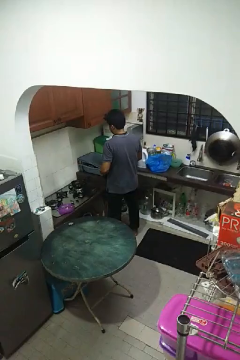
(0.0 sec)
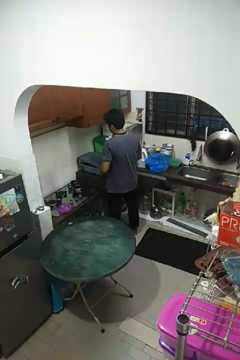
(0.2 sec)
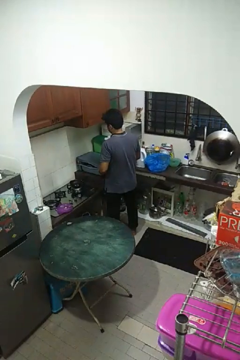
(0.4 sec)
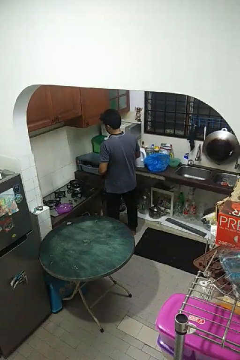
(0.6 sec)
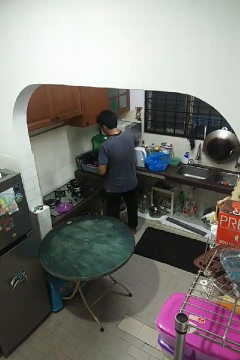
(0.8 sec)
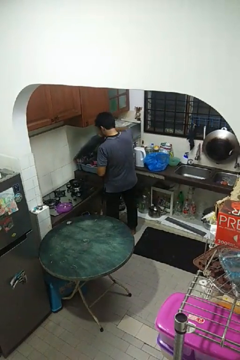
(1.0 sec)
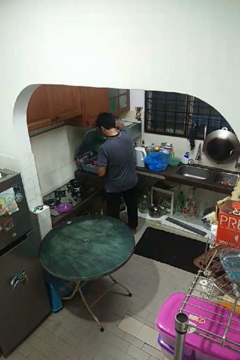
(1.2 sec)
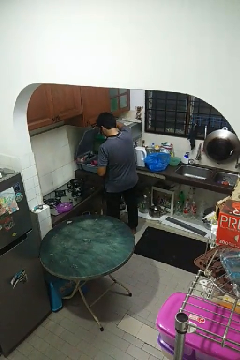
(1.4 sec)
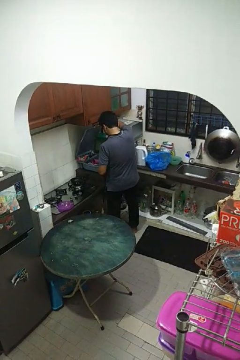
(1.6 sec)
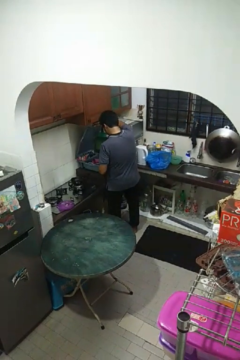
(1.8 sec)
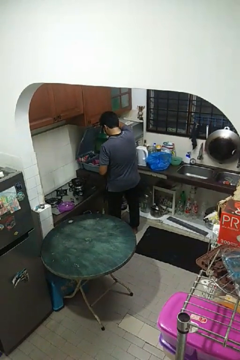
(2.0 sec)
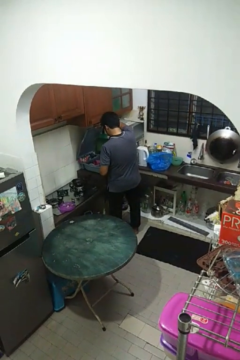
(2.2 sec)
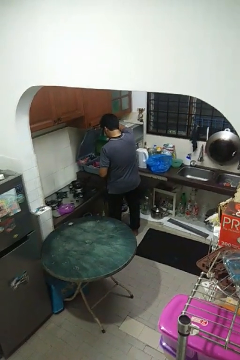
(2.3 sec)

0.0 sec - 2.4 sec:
person opens dishwasher

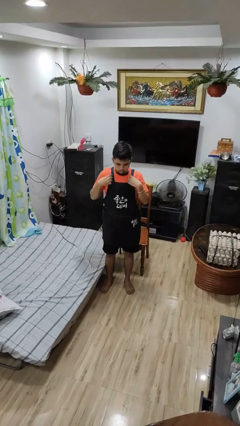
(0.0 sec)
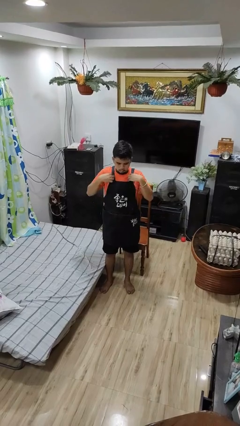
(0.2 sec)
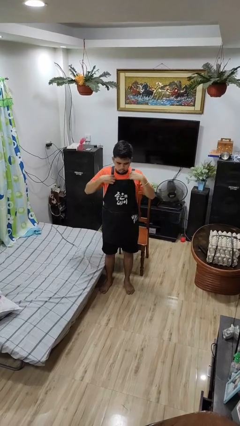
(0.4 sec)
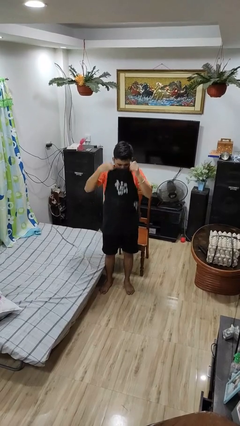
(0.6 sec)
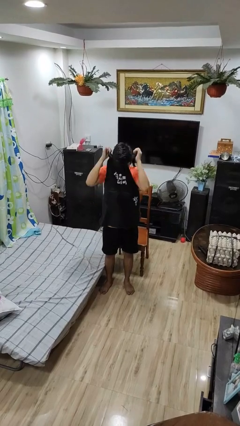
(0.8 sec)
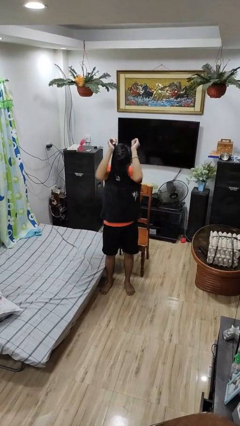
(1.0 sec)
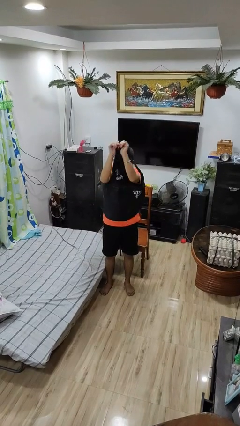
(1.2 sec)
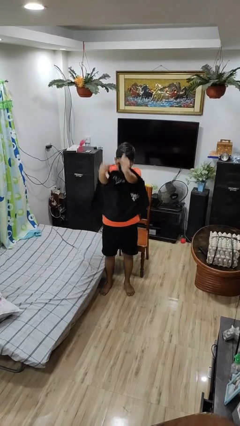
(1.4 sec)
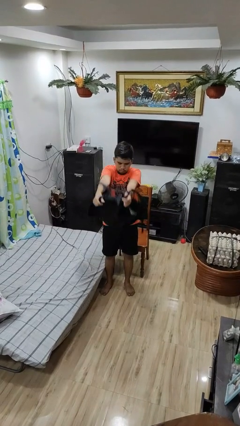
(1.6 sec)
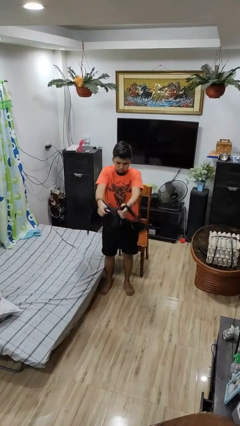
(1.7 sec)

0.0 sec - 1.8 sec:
person takes off apron

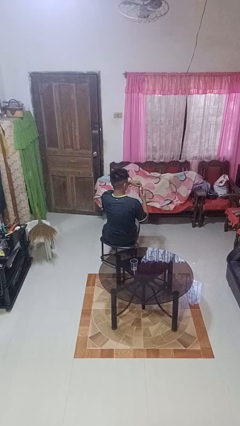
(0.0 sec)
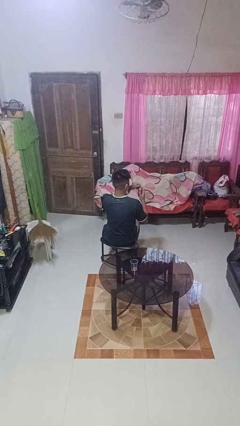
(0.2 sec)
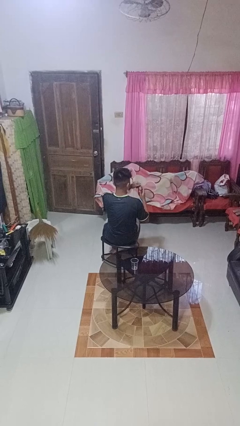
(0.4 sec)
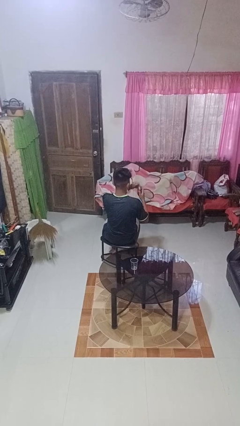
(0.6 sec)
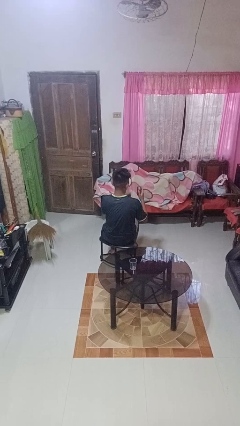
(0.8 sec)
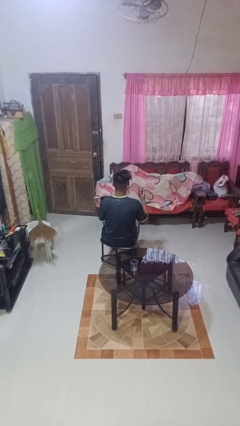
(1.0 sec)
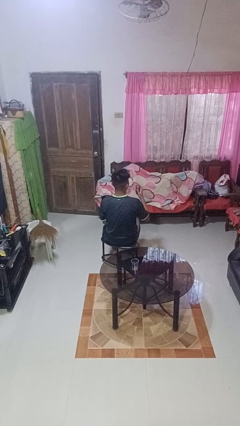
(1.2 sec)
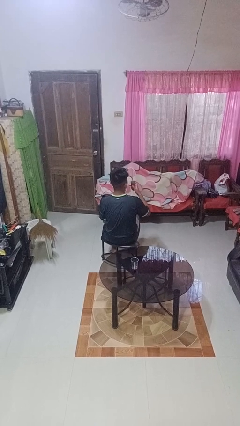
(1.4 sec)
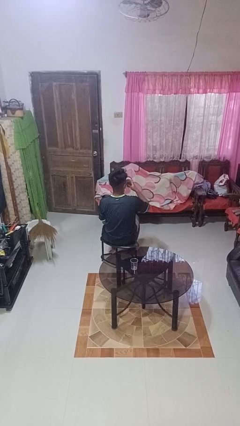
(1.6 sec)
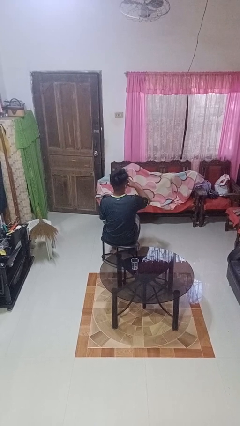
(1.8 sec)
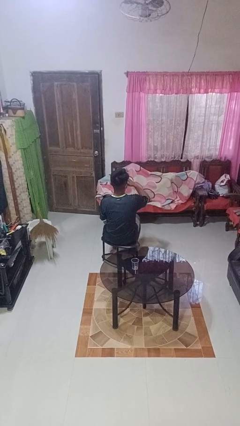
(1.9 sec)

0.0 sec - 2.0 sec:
person opens beverage can

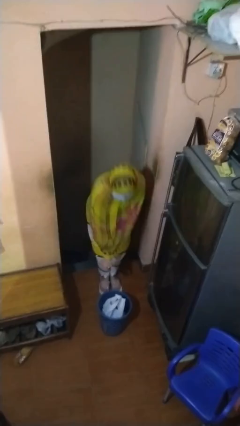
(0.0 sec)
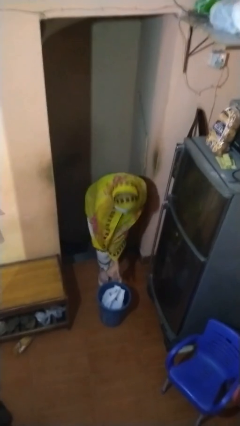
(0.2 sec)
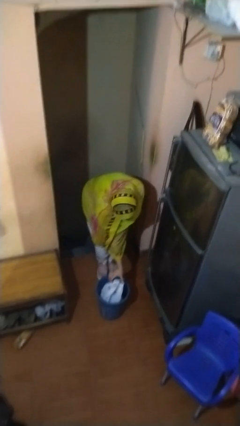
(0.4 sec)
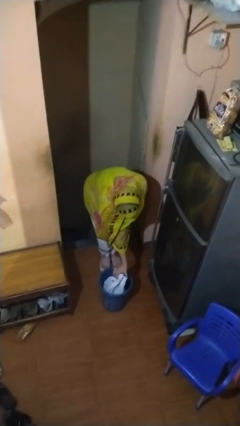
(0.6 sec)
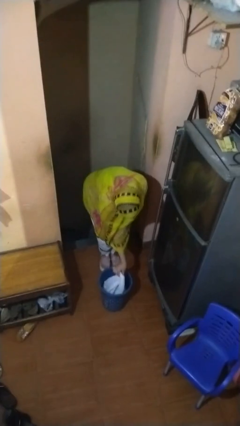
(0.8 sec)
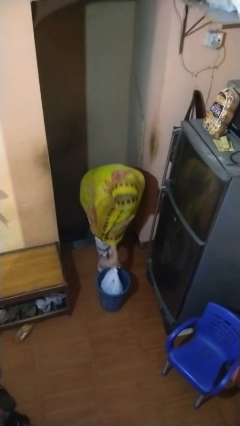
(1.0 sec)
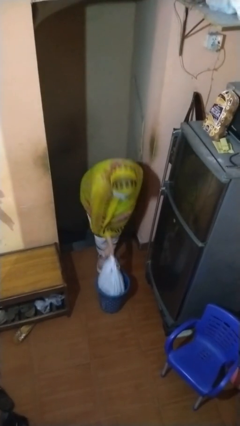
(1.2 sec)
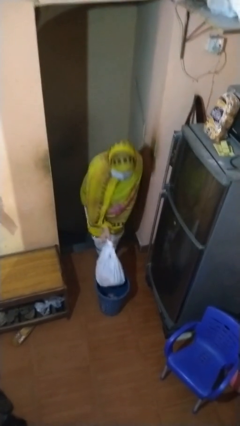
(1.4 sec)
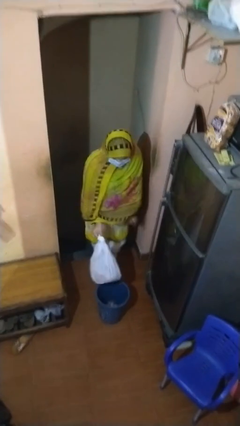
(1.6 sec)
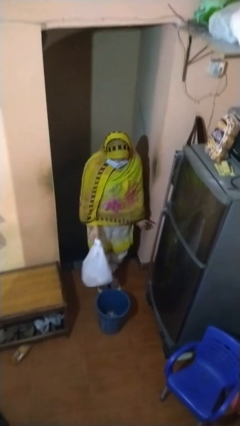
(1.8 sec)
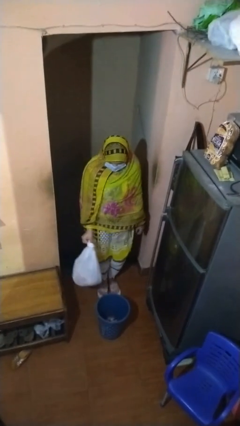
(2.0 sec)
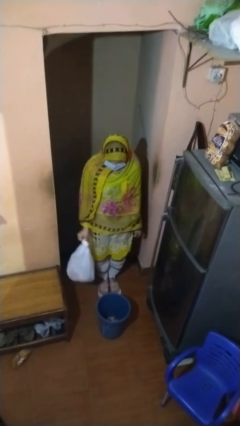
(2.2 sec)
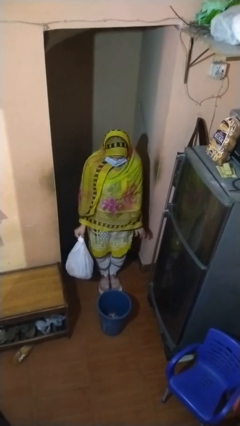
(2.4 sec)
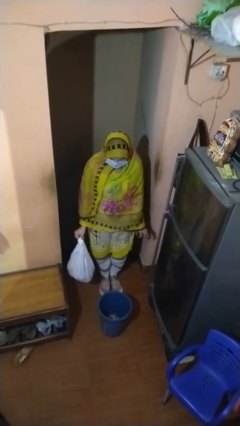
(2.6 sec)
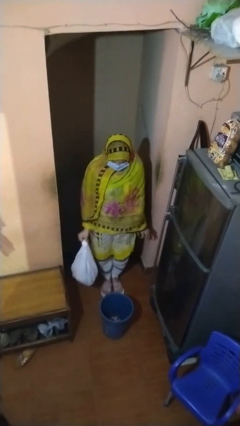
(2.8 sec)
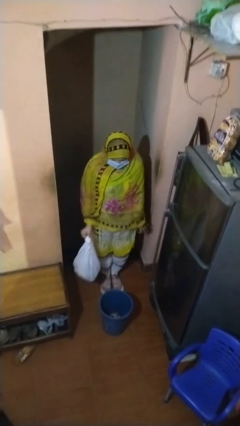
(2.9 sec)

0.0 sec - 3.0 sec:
person removes trashbag from trashcan

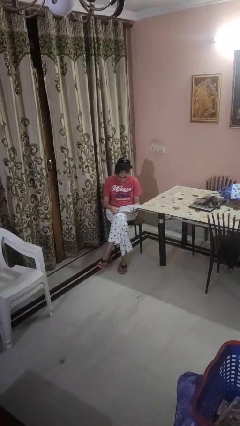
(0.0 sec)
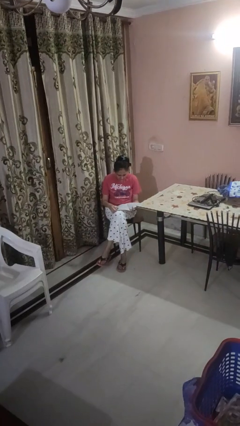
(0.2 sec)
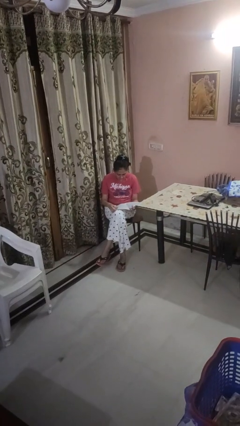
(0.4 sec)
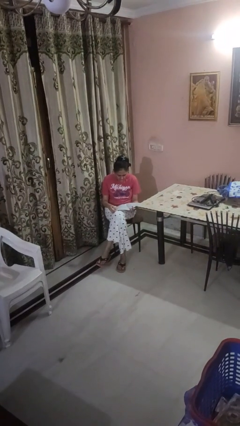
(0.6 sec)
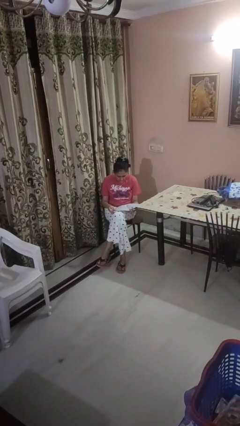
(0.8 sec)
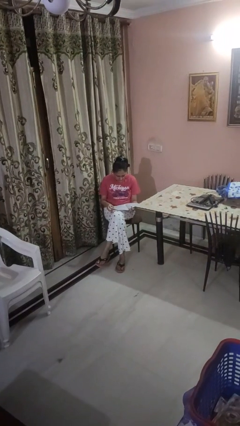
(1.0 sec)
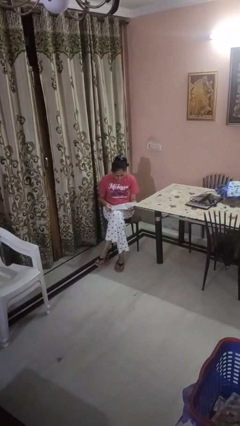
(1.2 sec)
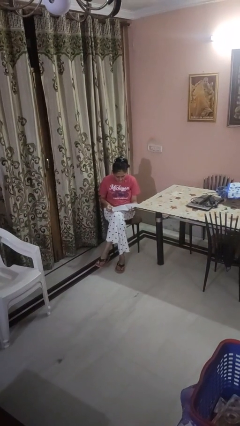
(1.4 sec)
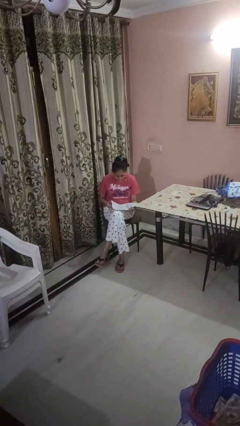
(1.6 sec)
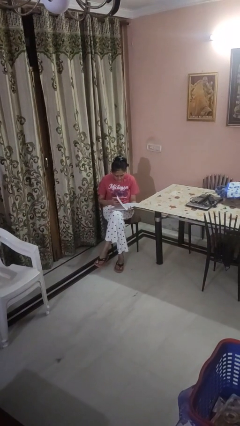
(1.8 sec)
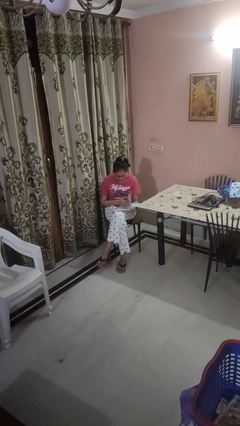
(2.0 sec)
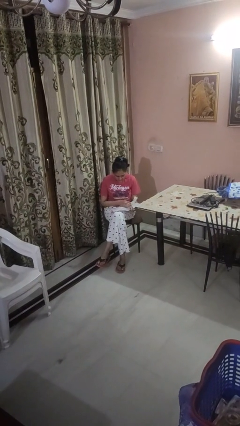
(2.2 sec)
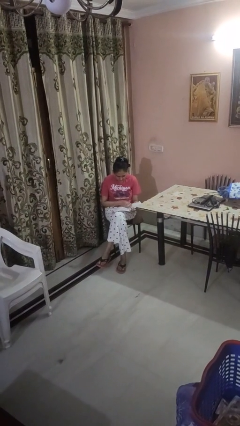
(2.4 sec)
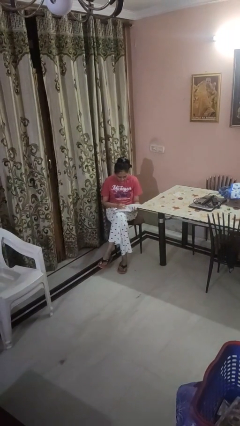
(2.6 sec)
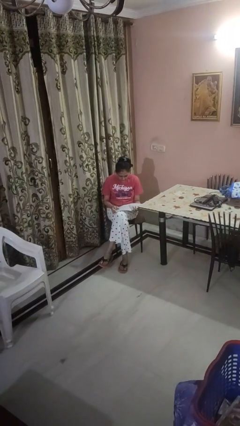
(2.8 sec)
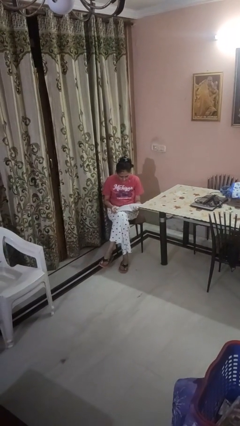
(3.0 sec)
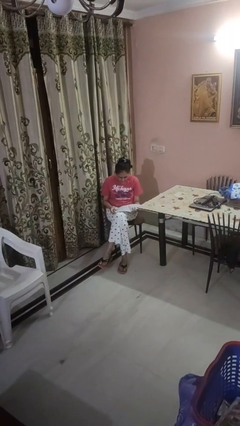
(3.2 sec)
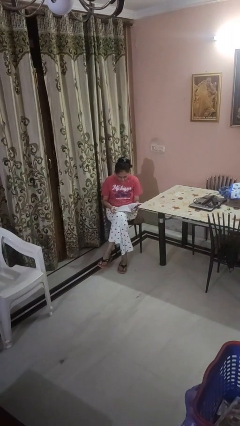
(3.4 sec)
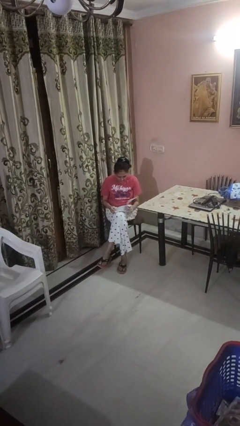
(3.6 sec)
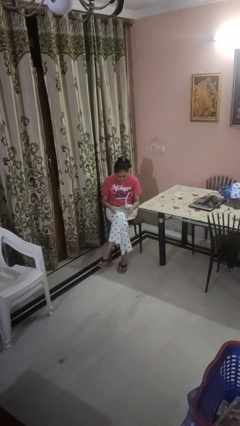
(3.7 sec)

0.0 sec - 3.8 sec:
person reads magazine

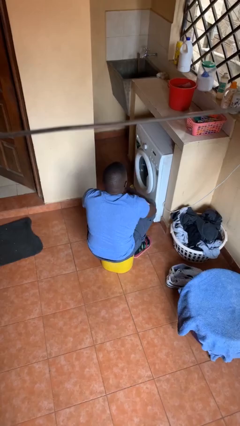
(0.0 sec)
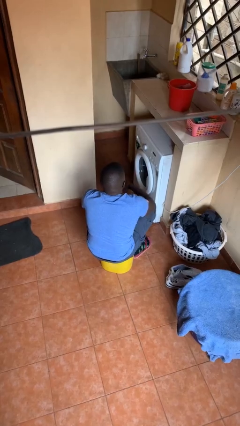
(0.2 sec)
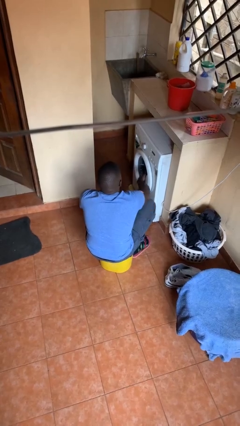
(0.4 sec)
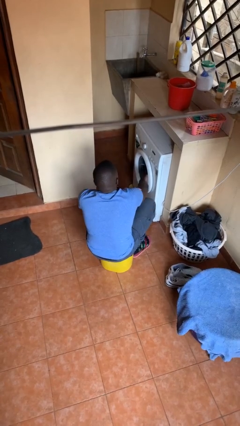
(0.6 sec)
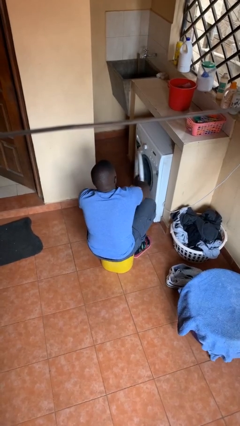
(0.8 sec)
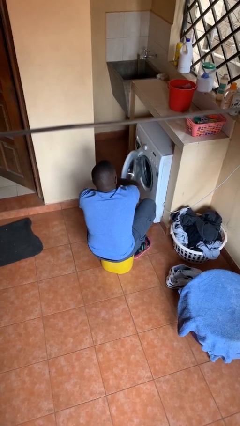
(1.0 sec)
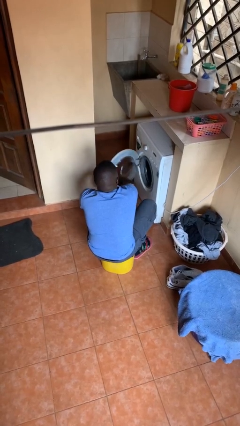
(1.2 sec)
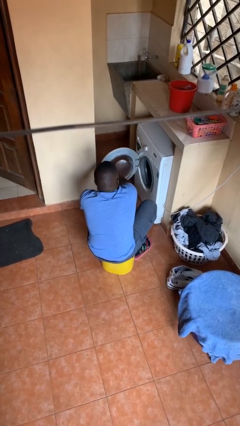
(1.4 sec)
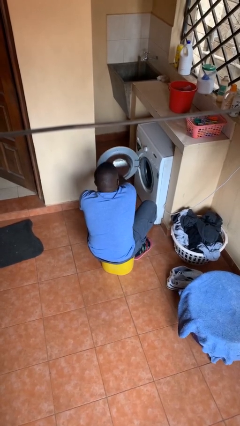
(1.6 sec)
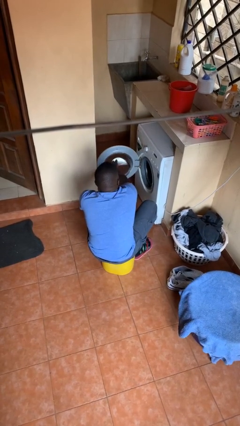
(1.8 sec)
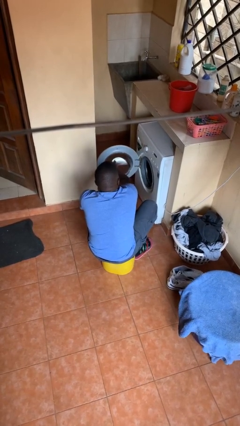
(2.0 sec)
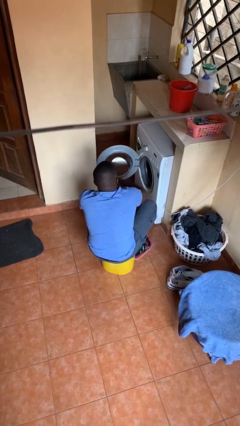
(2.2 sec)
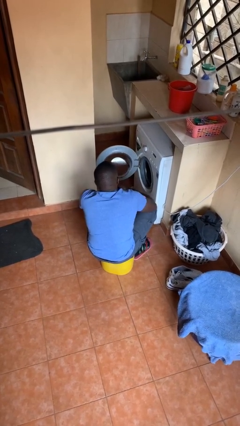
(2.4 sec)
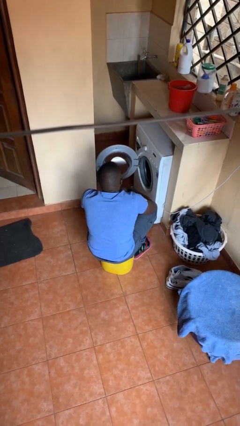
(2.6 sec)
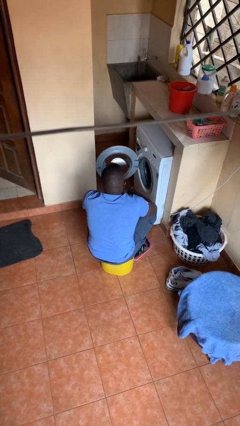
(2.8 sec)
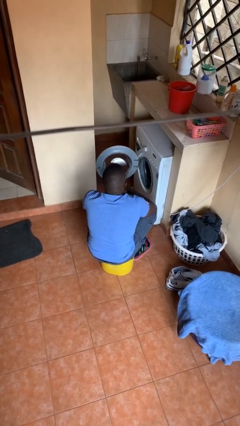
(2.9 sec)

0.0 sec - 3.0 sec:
person opens clothes washer

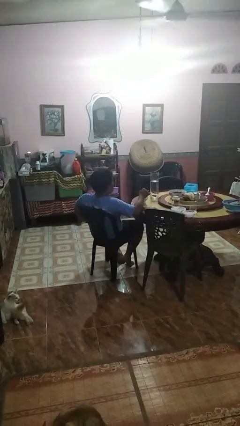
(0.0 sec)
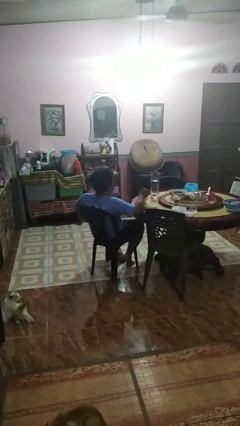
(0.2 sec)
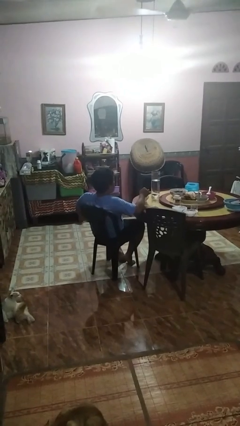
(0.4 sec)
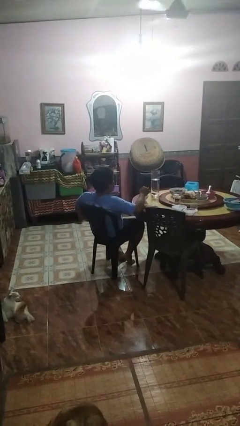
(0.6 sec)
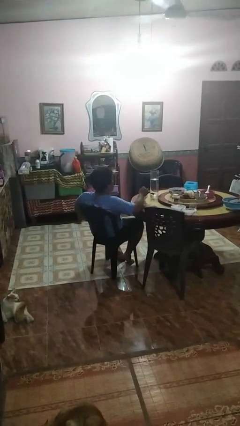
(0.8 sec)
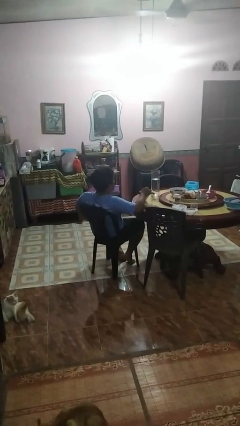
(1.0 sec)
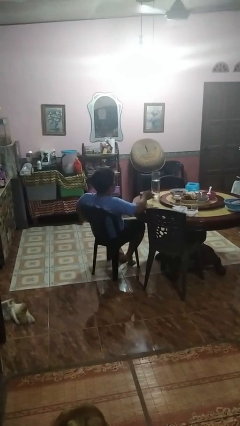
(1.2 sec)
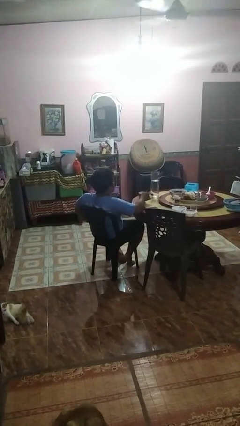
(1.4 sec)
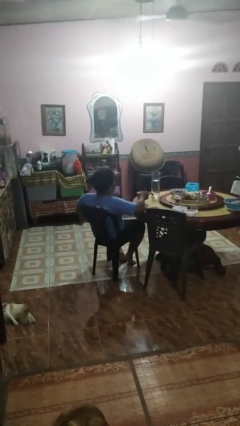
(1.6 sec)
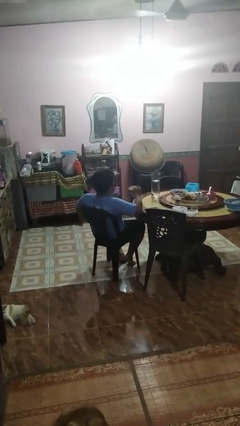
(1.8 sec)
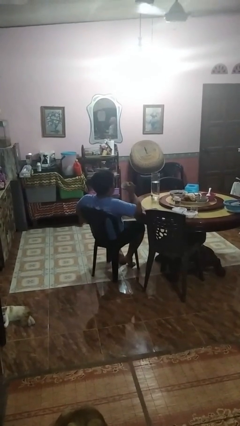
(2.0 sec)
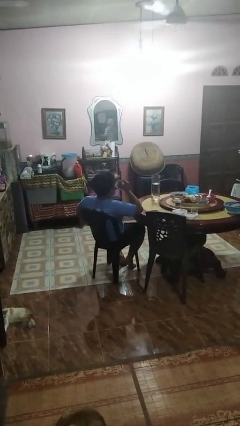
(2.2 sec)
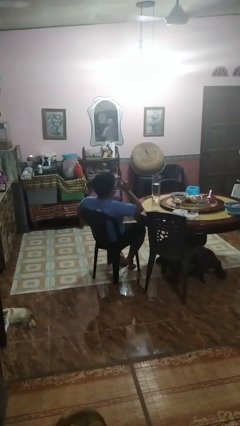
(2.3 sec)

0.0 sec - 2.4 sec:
person stirs mug
